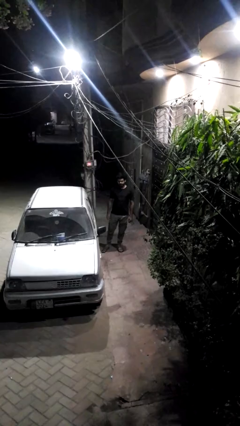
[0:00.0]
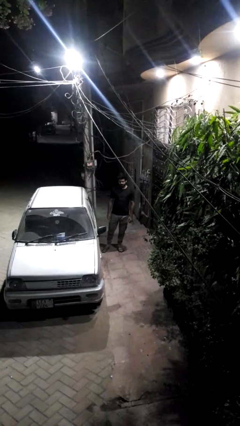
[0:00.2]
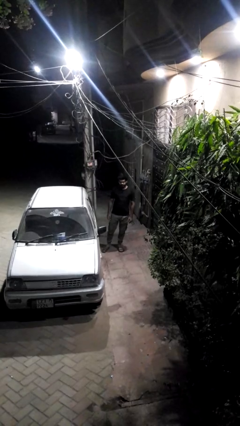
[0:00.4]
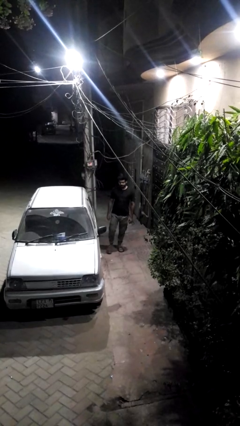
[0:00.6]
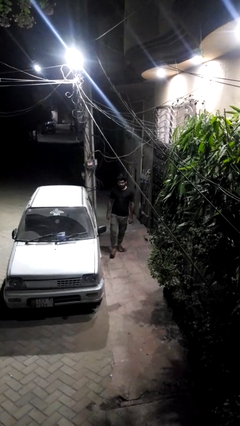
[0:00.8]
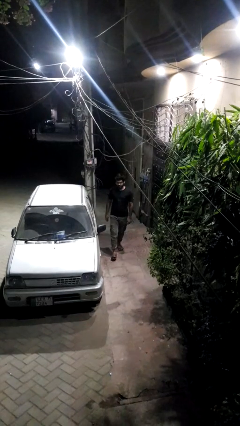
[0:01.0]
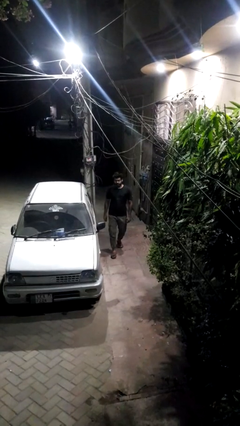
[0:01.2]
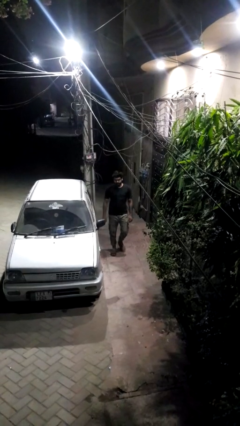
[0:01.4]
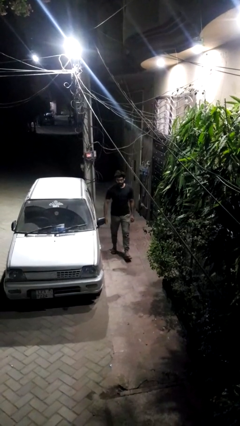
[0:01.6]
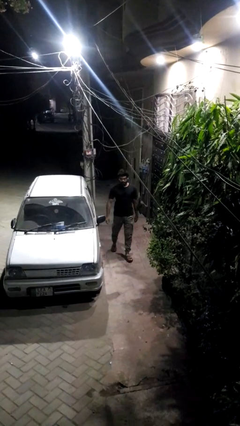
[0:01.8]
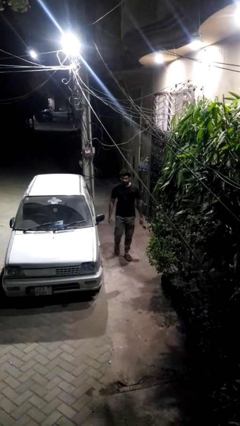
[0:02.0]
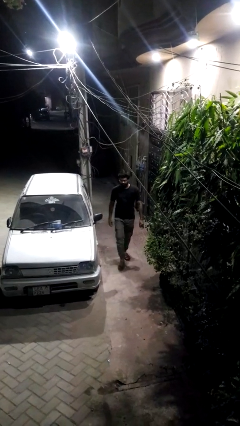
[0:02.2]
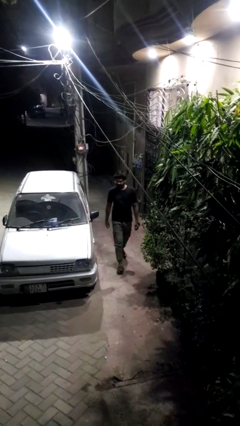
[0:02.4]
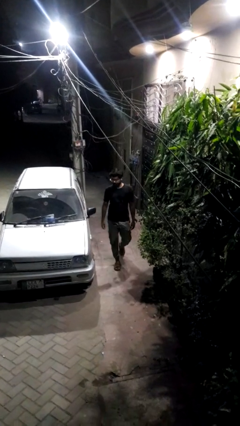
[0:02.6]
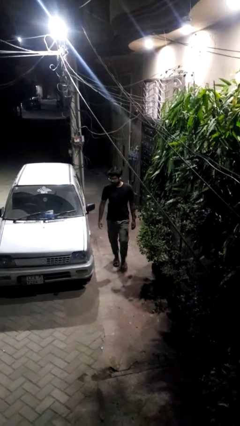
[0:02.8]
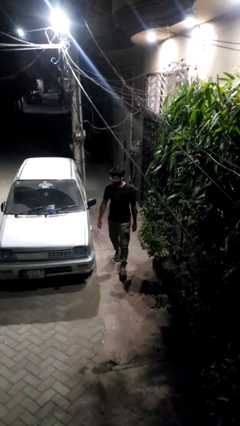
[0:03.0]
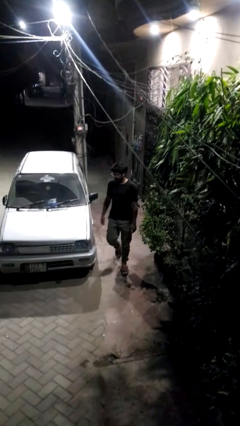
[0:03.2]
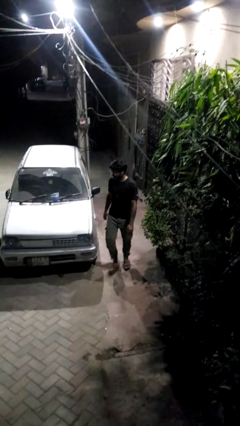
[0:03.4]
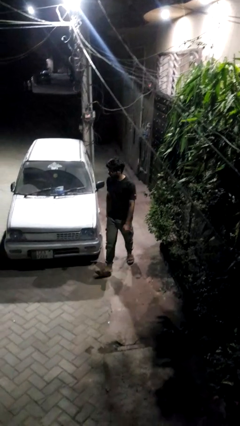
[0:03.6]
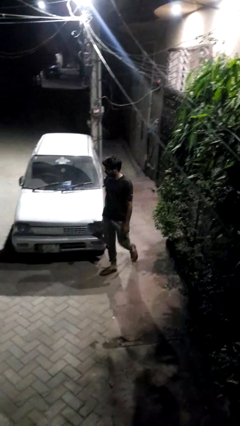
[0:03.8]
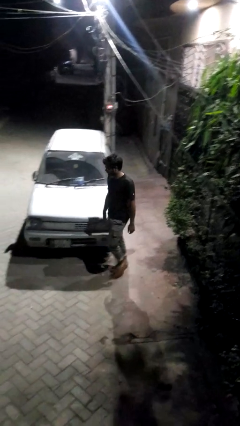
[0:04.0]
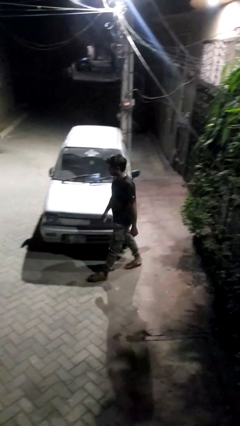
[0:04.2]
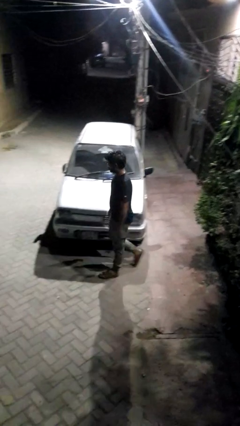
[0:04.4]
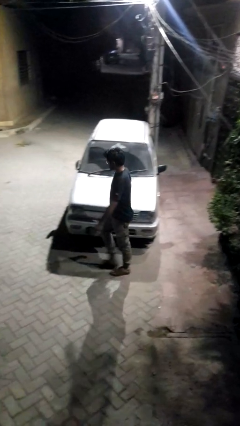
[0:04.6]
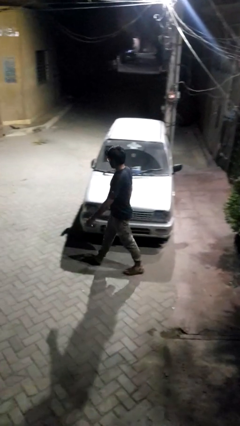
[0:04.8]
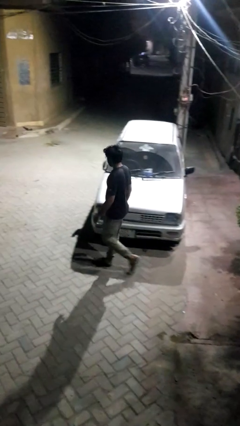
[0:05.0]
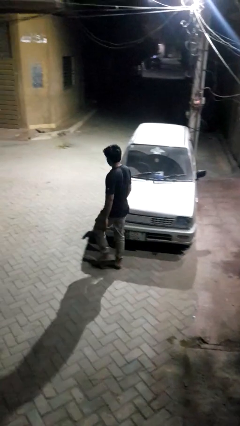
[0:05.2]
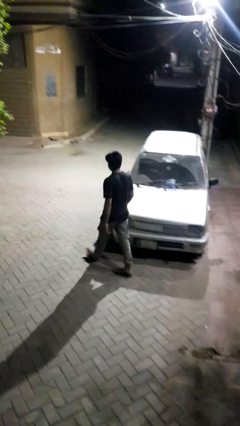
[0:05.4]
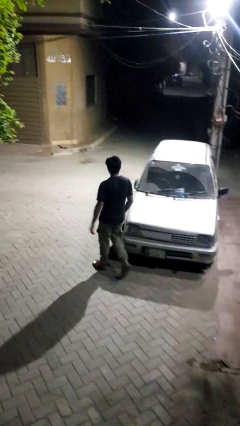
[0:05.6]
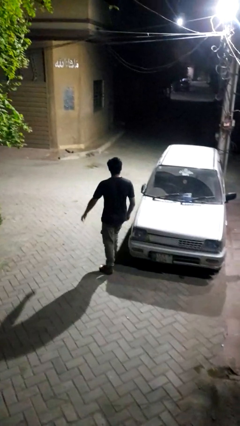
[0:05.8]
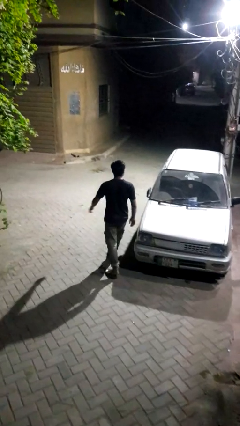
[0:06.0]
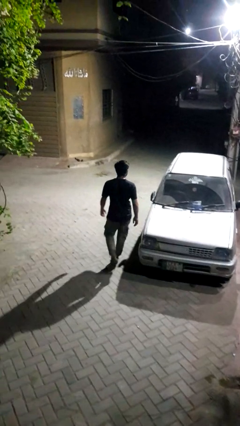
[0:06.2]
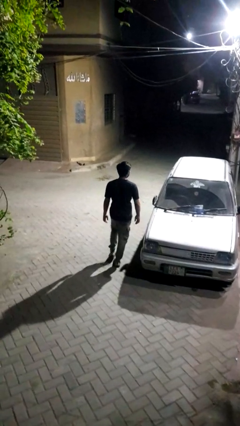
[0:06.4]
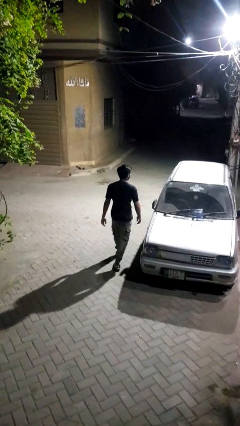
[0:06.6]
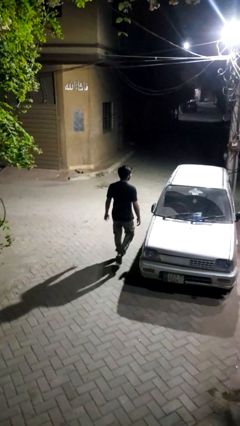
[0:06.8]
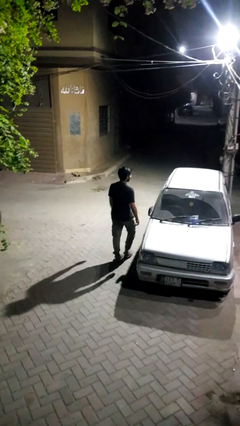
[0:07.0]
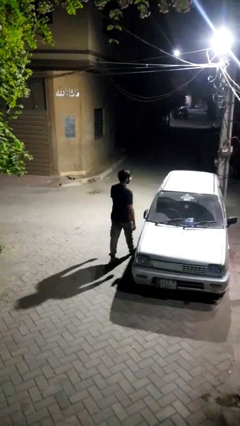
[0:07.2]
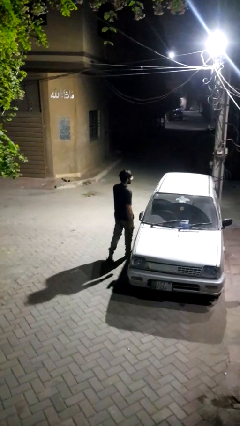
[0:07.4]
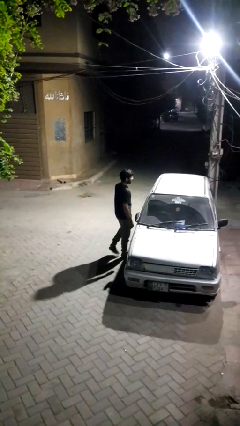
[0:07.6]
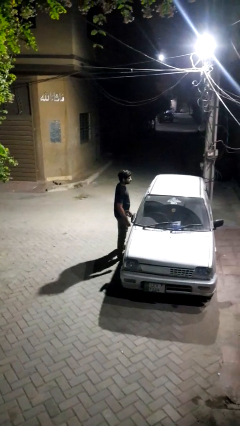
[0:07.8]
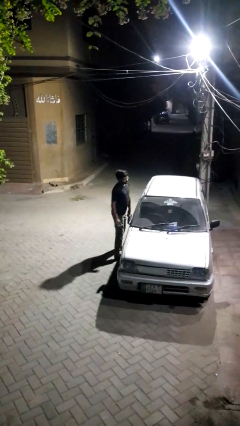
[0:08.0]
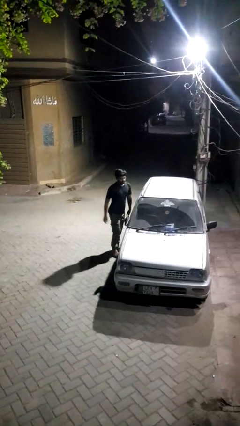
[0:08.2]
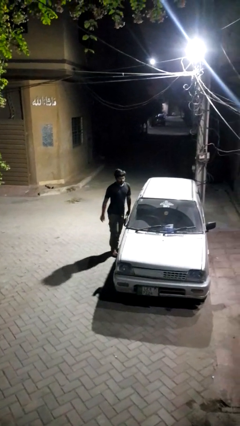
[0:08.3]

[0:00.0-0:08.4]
person walks around car

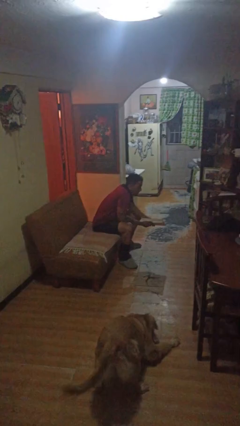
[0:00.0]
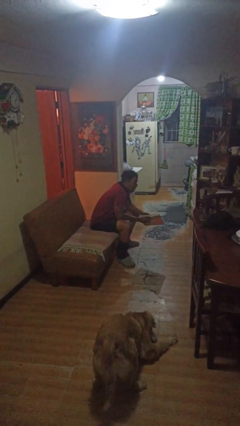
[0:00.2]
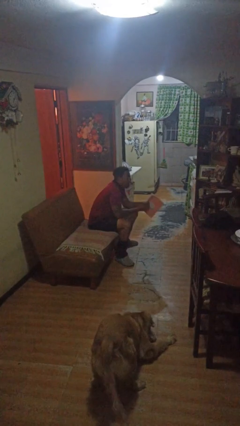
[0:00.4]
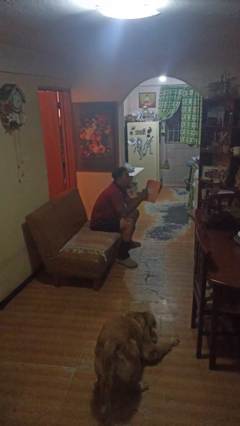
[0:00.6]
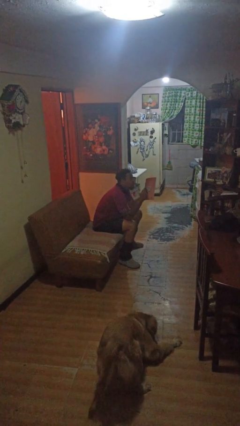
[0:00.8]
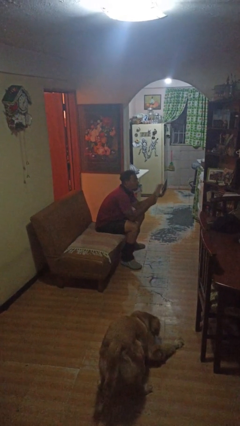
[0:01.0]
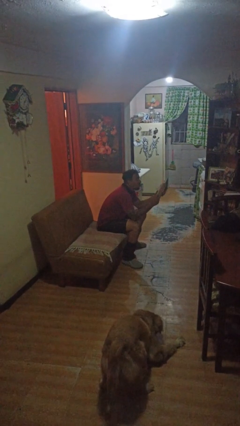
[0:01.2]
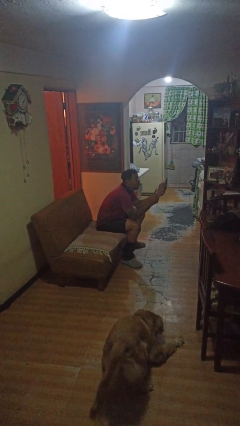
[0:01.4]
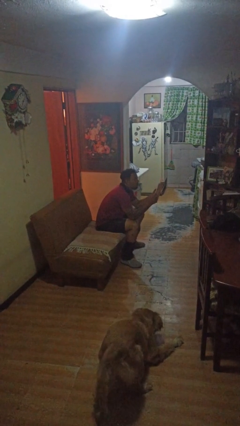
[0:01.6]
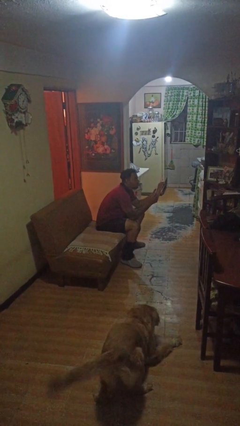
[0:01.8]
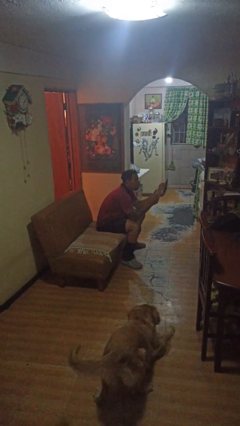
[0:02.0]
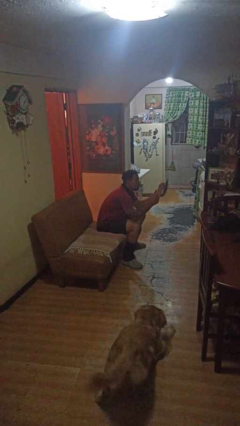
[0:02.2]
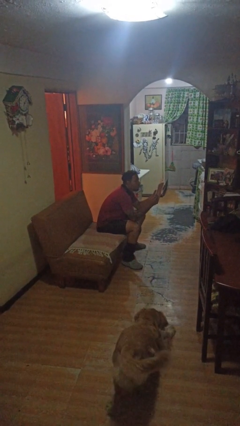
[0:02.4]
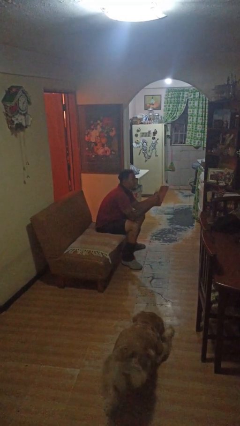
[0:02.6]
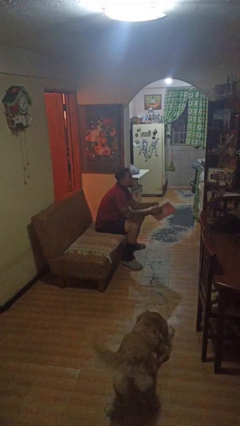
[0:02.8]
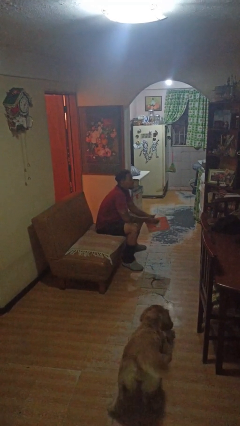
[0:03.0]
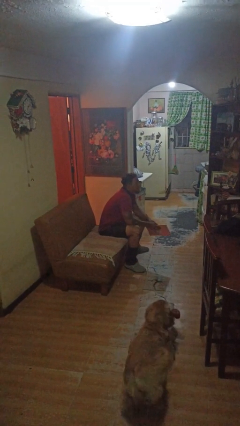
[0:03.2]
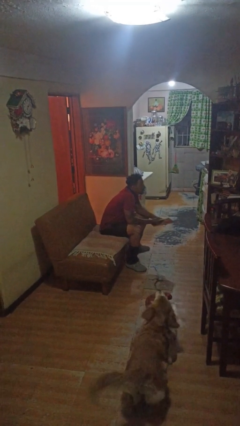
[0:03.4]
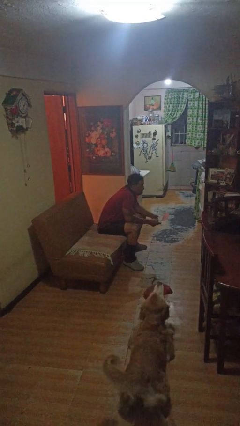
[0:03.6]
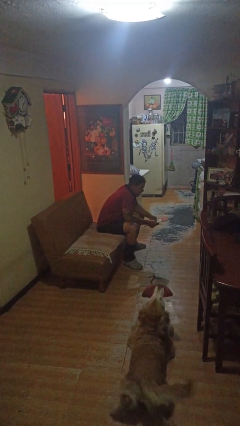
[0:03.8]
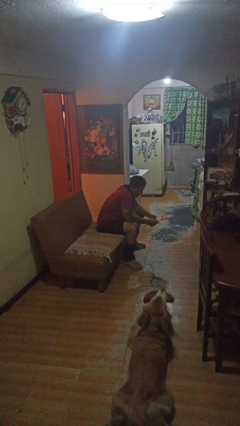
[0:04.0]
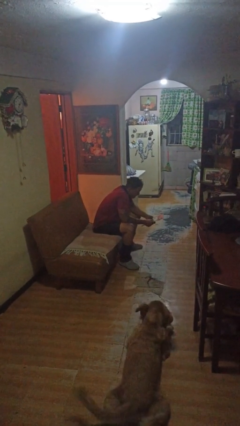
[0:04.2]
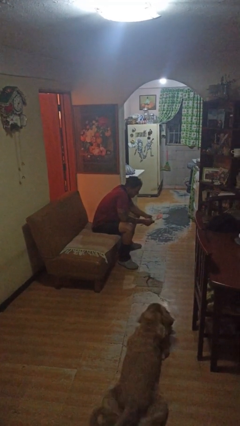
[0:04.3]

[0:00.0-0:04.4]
person reads document

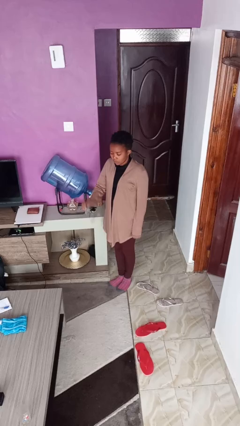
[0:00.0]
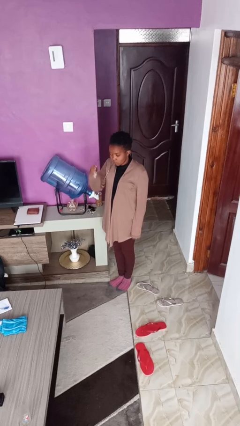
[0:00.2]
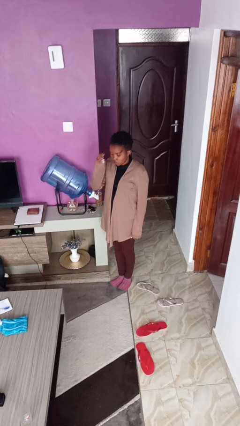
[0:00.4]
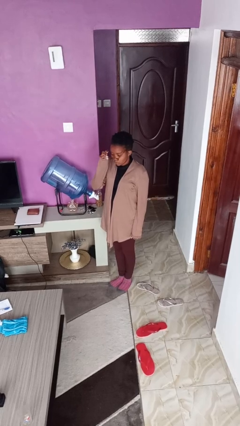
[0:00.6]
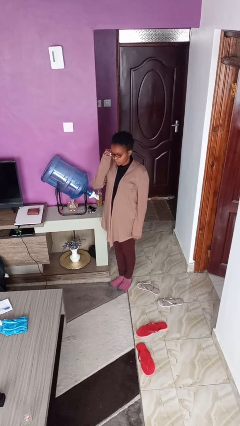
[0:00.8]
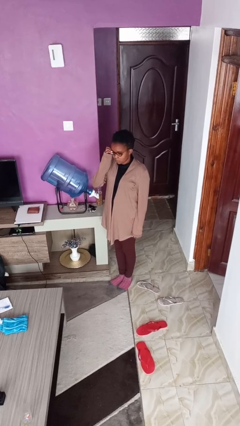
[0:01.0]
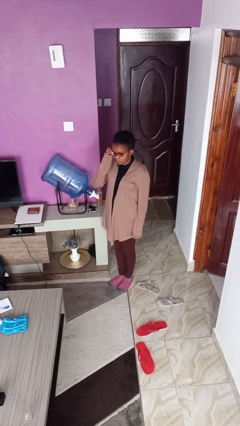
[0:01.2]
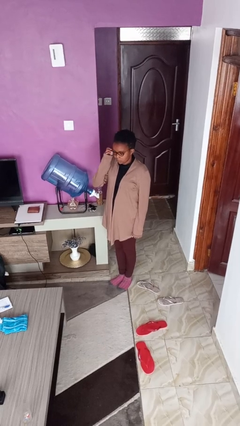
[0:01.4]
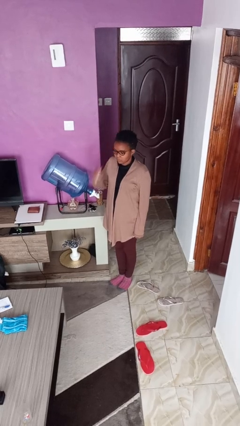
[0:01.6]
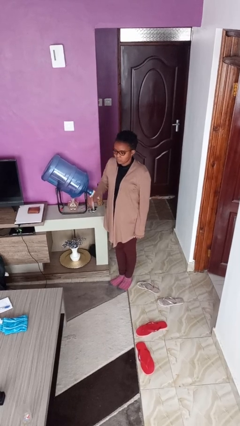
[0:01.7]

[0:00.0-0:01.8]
person puts on glasses

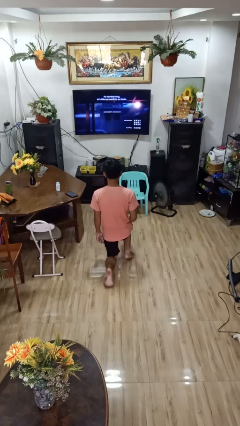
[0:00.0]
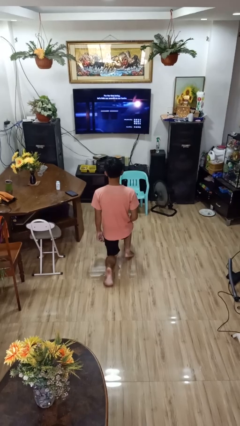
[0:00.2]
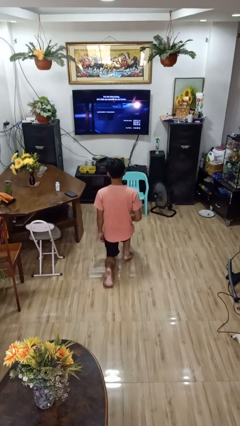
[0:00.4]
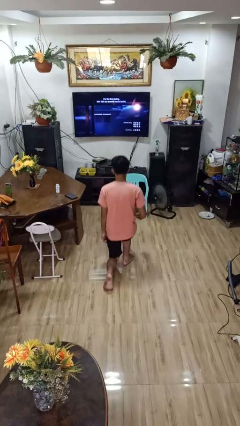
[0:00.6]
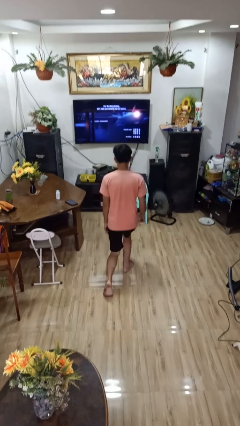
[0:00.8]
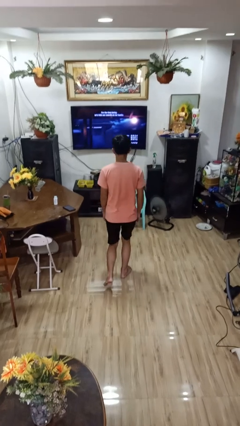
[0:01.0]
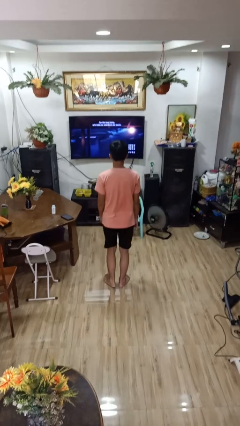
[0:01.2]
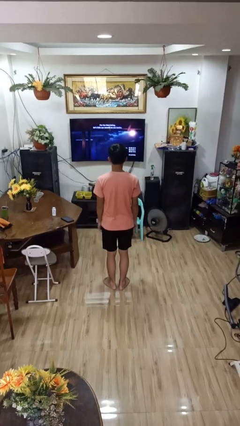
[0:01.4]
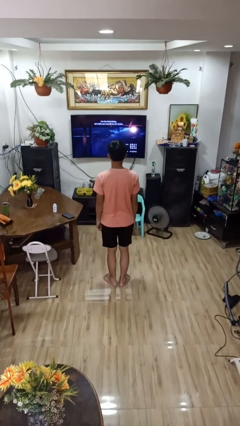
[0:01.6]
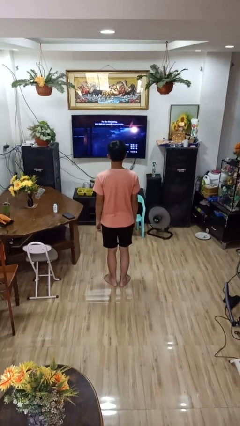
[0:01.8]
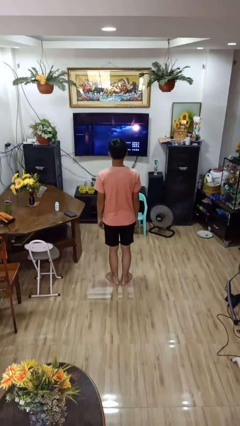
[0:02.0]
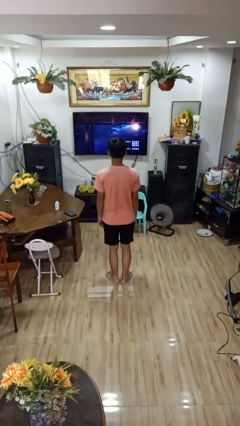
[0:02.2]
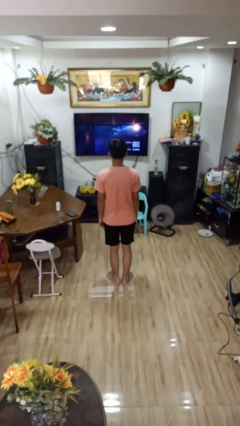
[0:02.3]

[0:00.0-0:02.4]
person stands up from floor

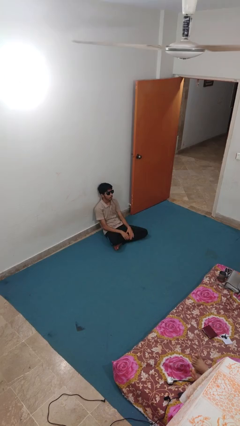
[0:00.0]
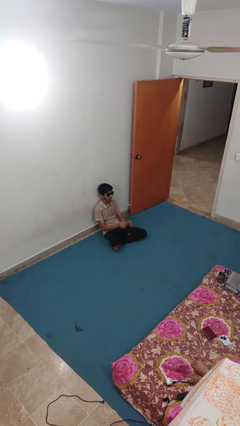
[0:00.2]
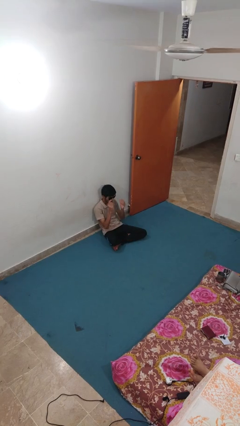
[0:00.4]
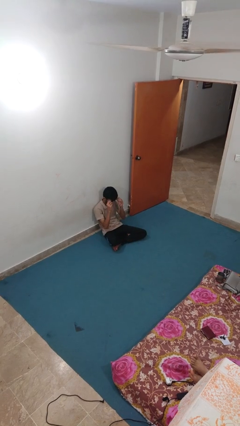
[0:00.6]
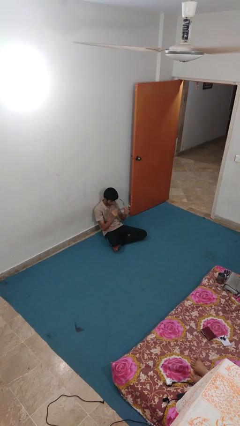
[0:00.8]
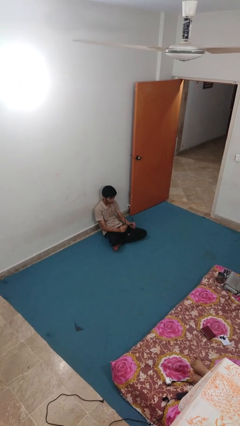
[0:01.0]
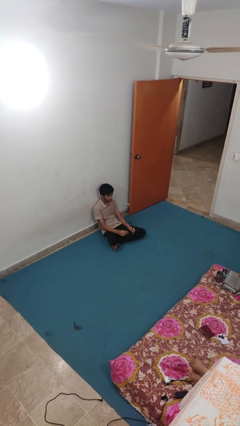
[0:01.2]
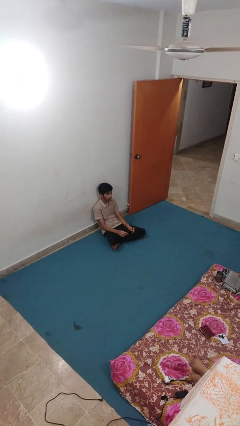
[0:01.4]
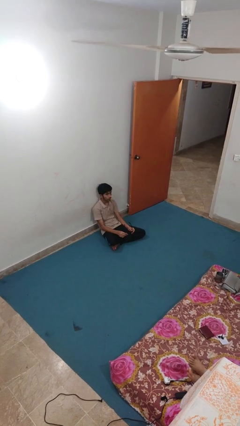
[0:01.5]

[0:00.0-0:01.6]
person takes off sunglasses
